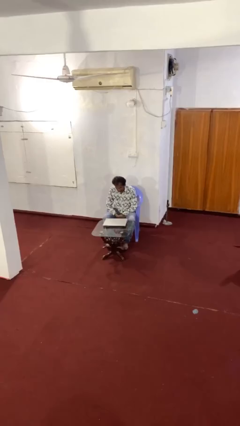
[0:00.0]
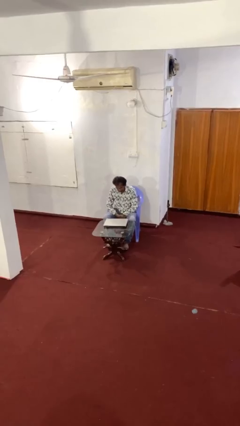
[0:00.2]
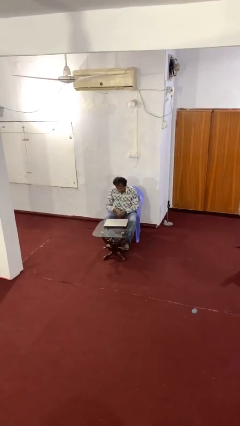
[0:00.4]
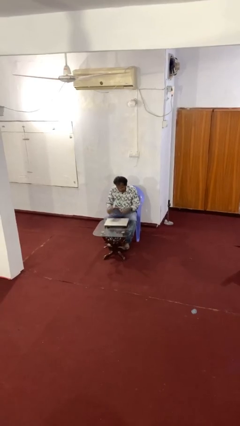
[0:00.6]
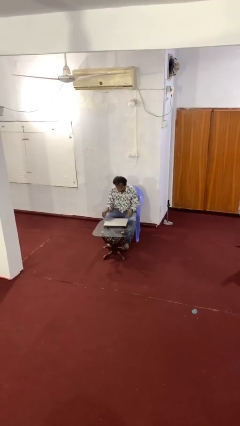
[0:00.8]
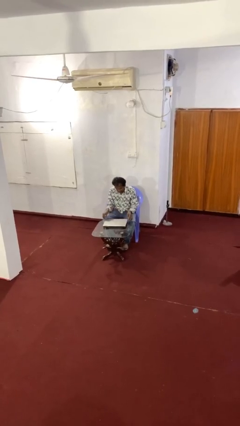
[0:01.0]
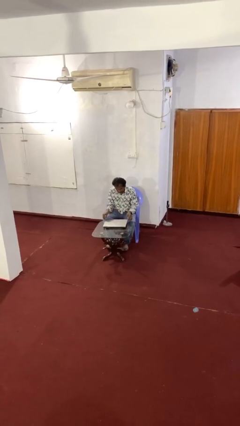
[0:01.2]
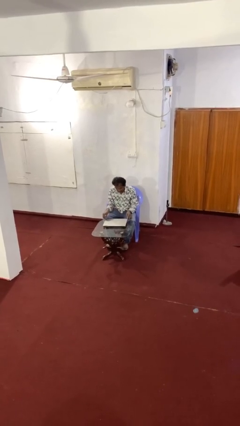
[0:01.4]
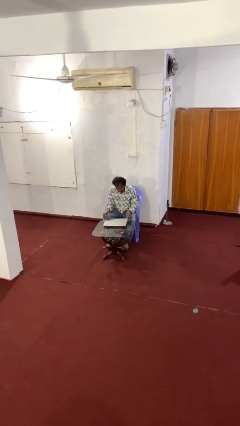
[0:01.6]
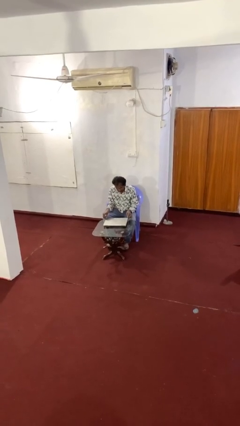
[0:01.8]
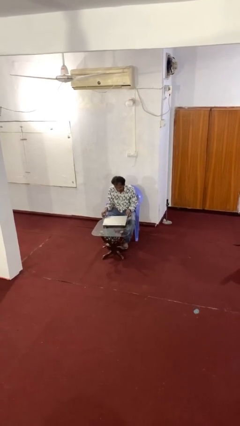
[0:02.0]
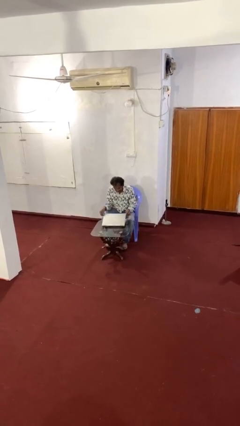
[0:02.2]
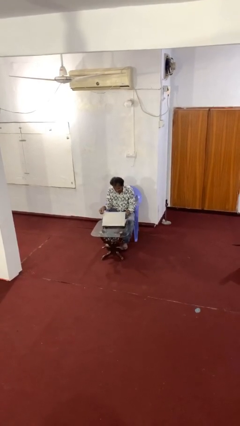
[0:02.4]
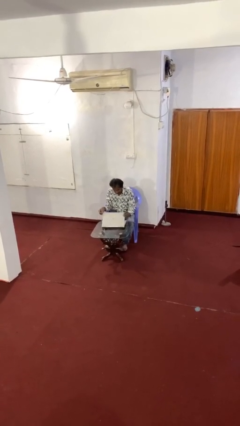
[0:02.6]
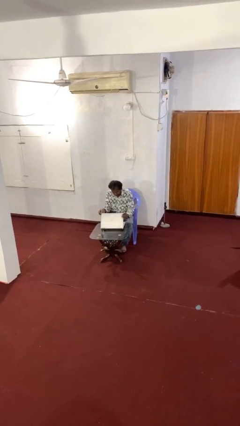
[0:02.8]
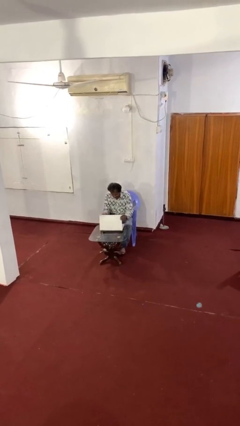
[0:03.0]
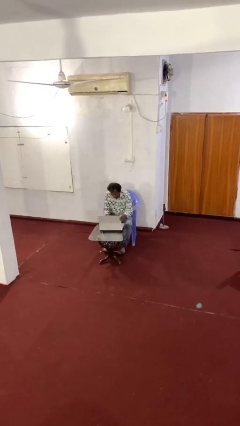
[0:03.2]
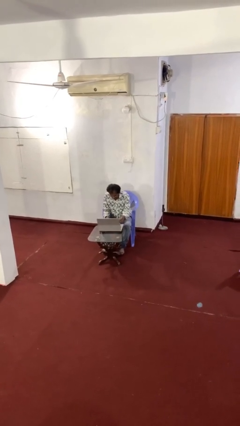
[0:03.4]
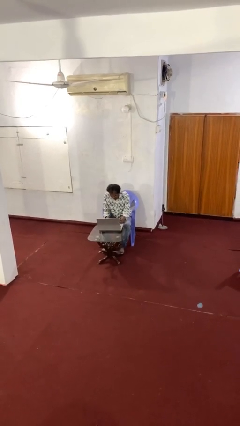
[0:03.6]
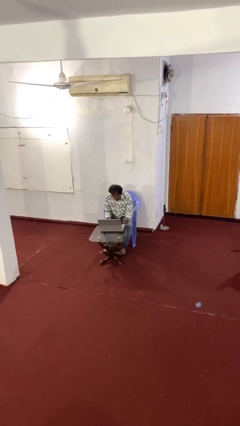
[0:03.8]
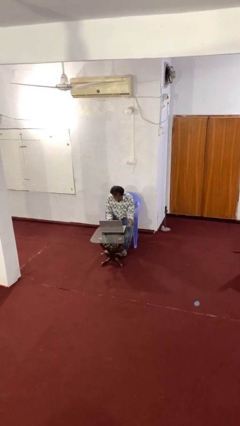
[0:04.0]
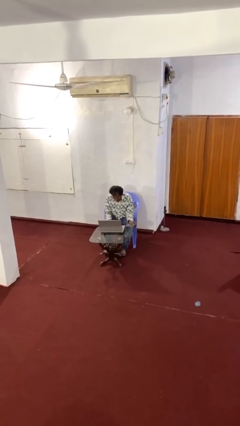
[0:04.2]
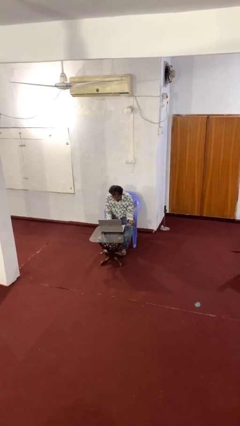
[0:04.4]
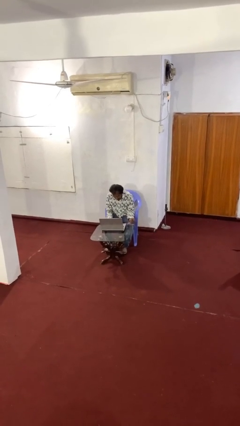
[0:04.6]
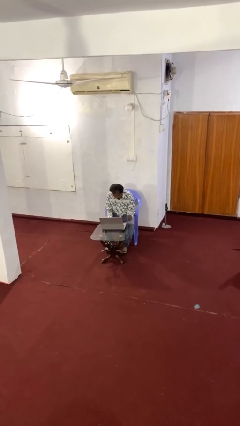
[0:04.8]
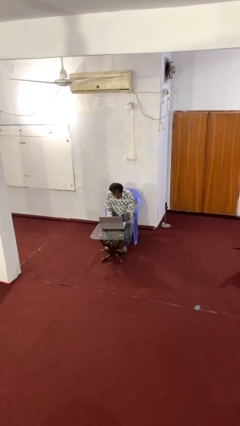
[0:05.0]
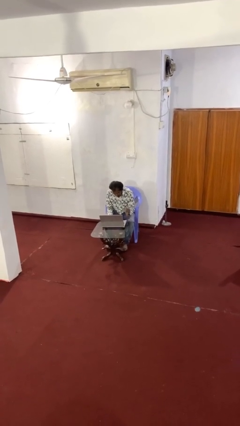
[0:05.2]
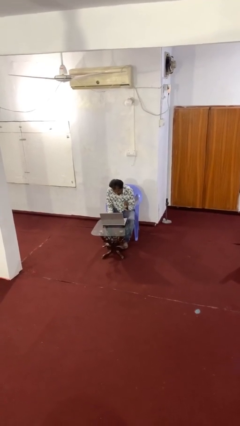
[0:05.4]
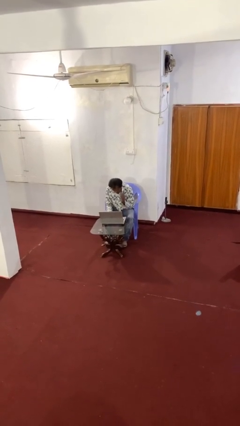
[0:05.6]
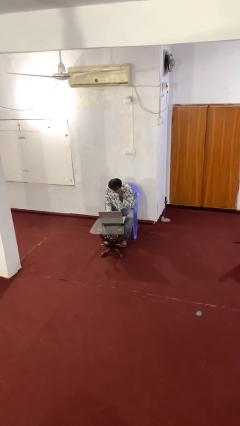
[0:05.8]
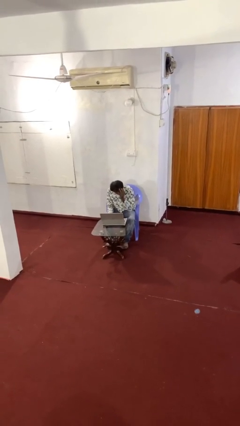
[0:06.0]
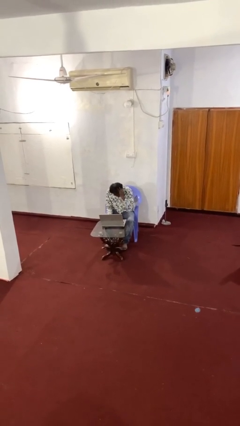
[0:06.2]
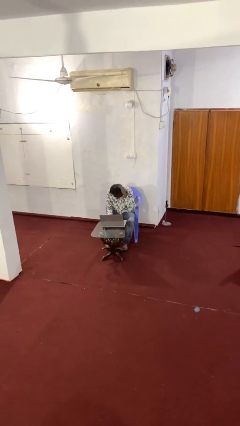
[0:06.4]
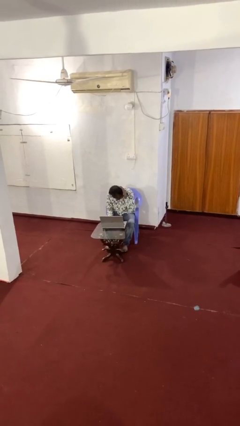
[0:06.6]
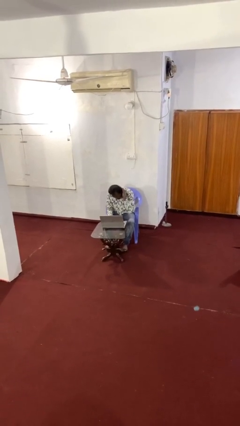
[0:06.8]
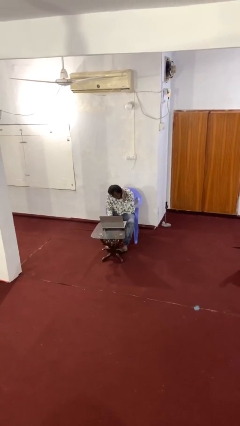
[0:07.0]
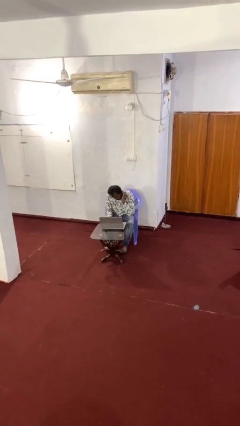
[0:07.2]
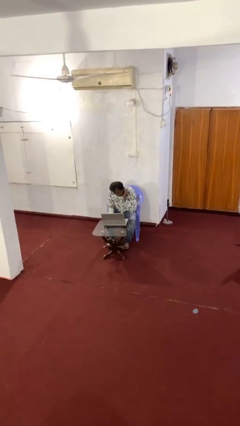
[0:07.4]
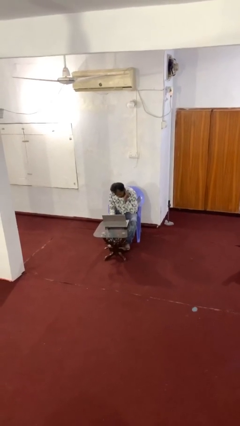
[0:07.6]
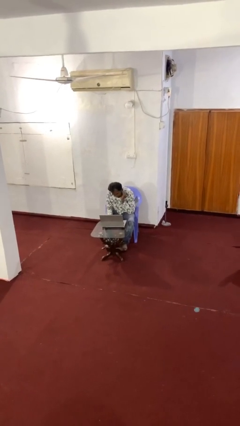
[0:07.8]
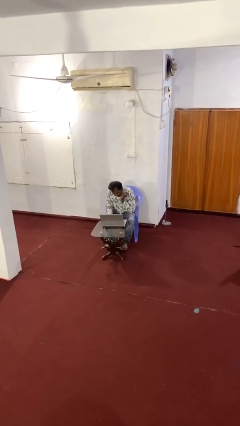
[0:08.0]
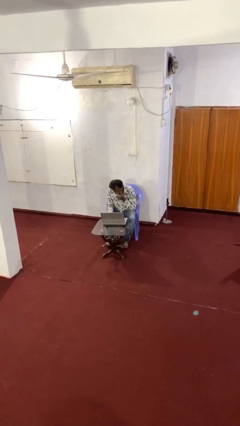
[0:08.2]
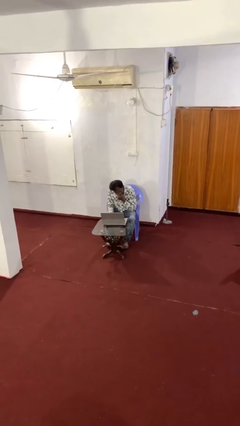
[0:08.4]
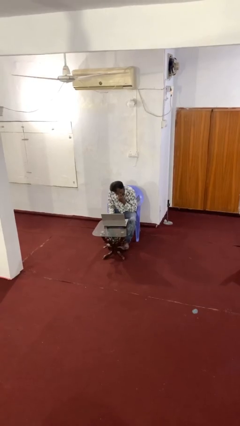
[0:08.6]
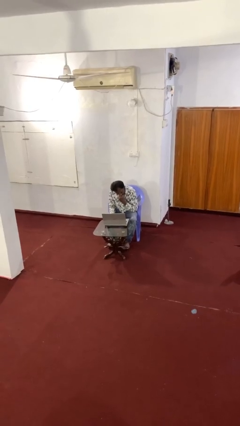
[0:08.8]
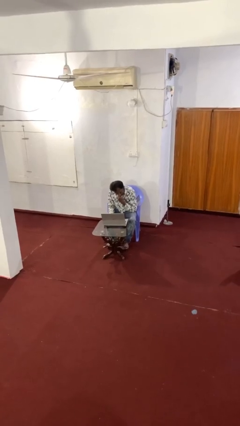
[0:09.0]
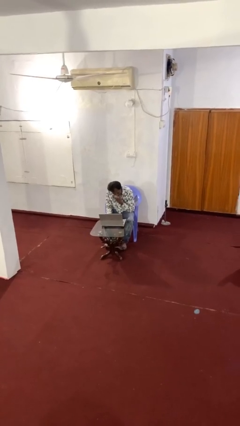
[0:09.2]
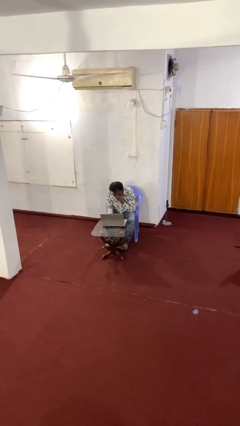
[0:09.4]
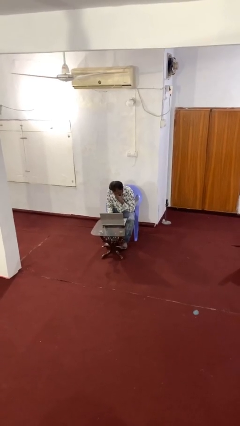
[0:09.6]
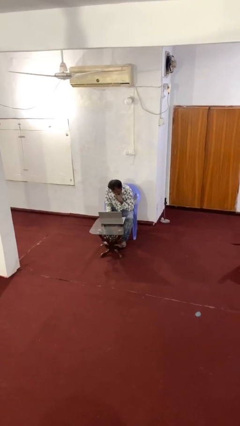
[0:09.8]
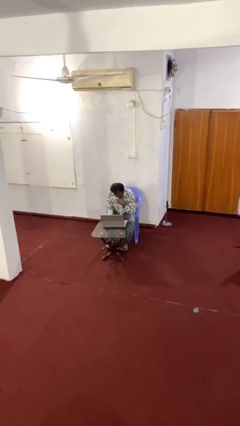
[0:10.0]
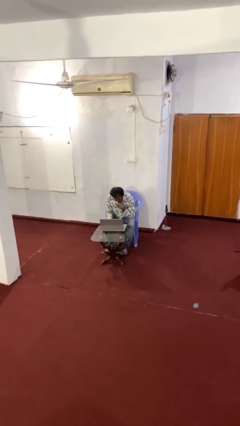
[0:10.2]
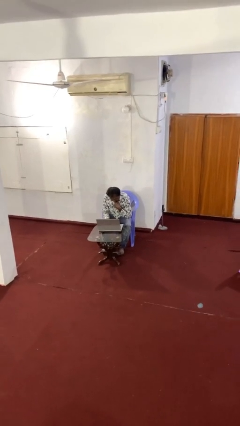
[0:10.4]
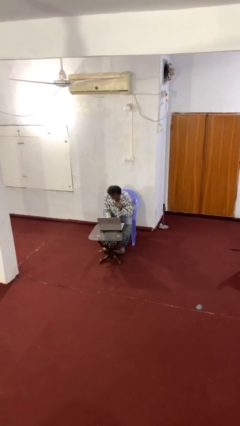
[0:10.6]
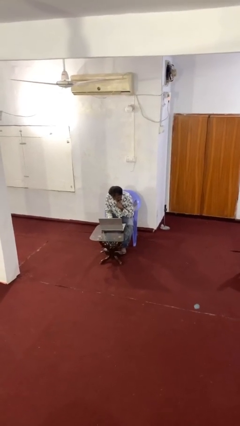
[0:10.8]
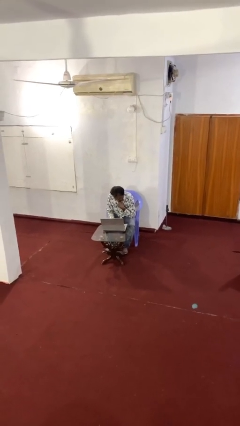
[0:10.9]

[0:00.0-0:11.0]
person interacts with laptop

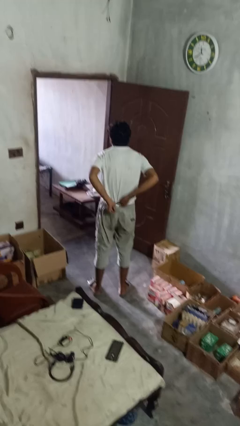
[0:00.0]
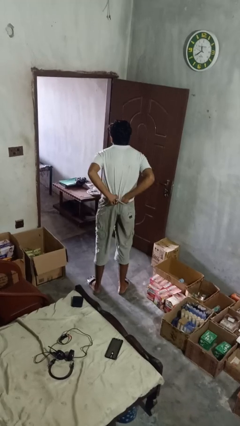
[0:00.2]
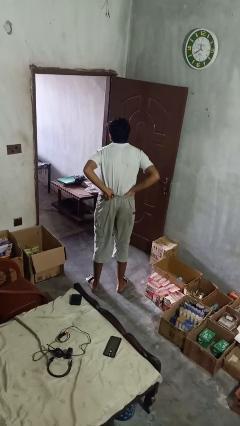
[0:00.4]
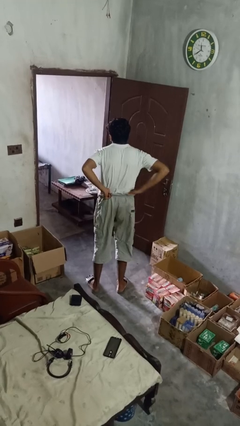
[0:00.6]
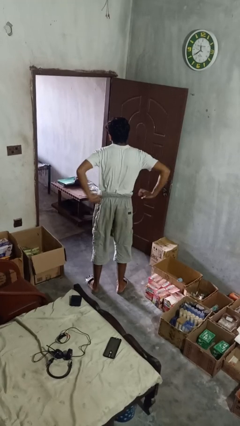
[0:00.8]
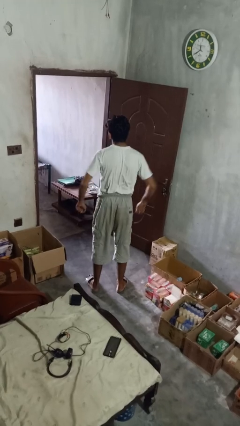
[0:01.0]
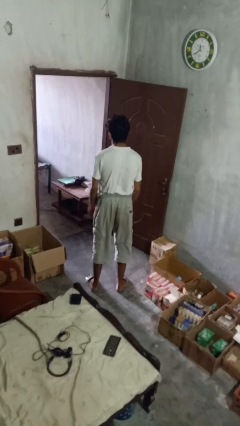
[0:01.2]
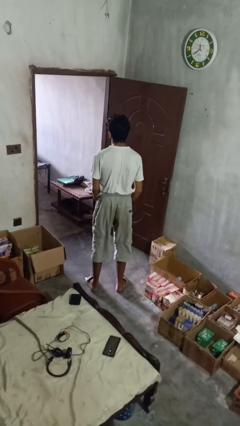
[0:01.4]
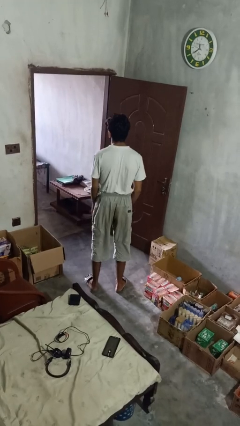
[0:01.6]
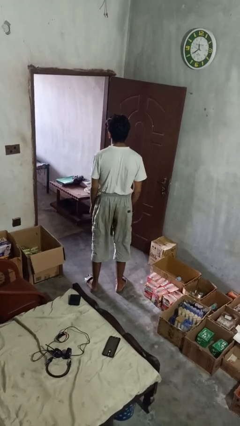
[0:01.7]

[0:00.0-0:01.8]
person tucks in shirt

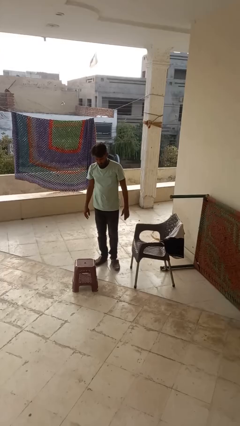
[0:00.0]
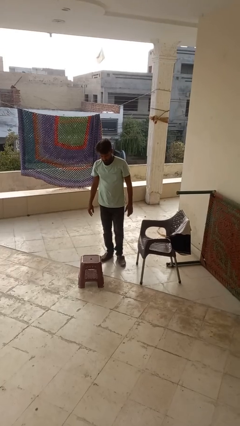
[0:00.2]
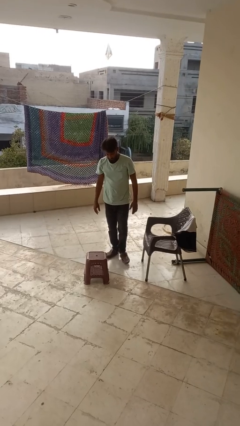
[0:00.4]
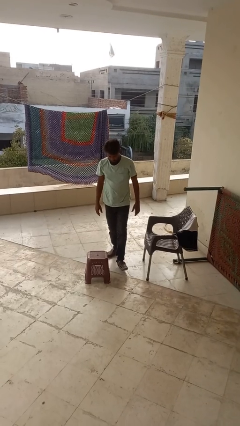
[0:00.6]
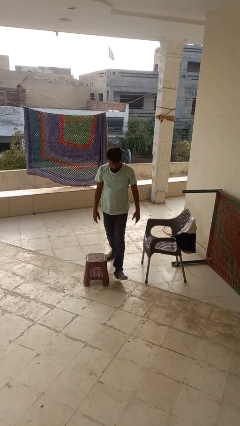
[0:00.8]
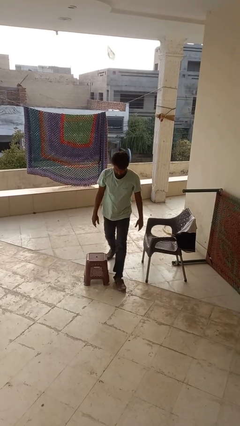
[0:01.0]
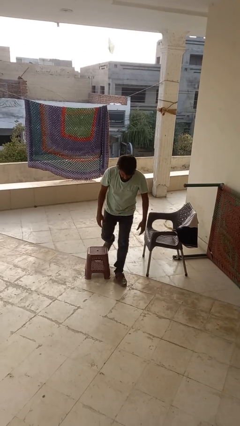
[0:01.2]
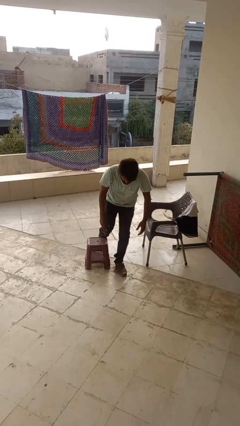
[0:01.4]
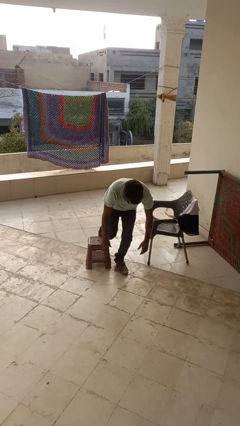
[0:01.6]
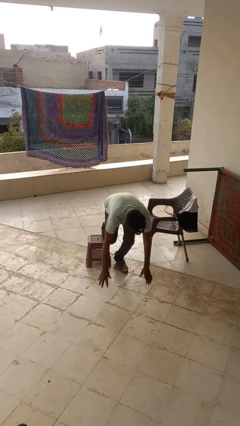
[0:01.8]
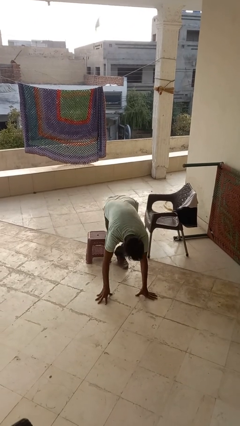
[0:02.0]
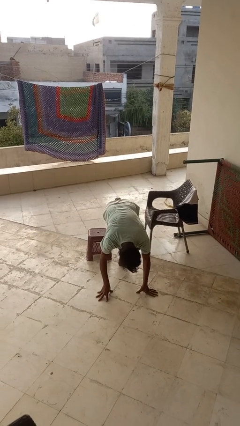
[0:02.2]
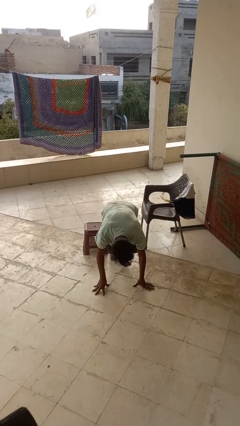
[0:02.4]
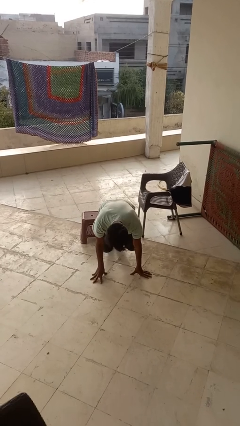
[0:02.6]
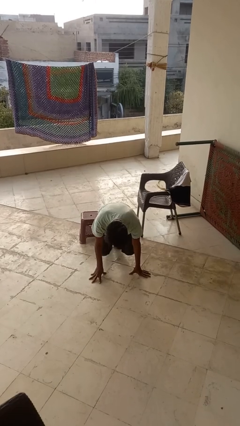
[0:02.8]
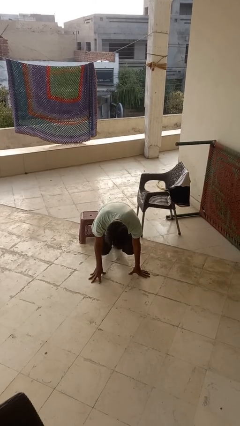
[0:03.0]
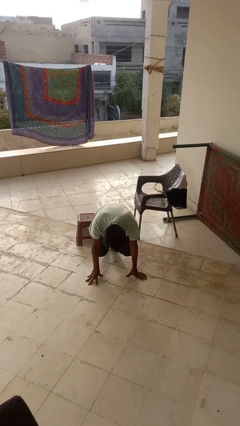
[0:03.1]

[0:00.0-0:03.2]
person trips on object on floor

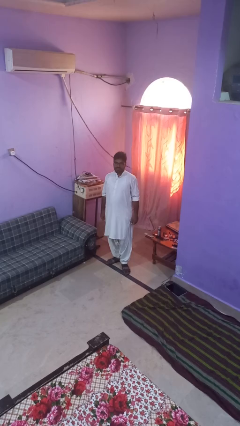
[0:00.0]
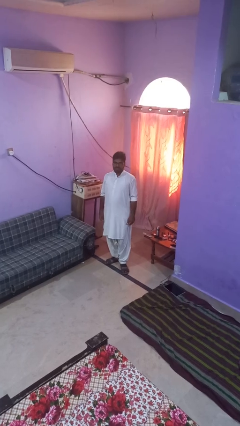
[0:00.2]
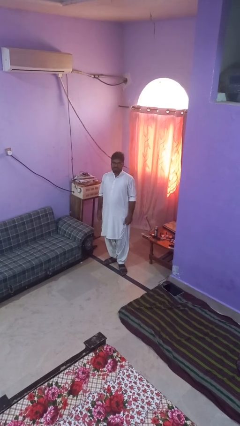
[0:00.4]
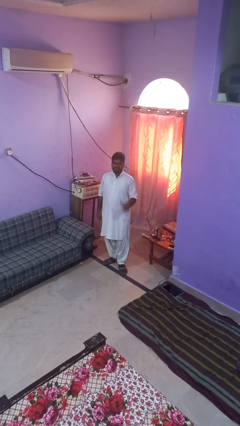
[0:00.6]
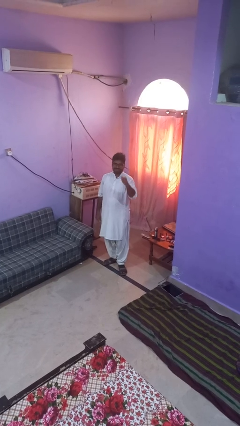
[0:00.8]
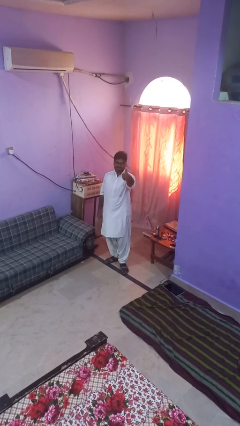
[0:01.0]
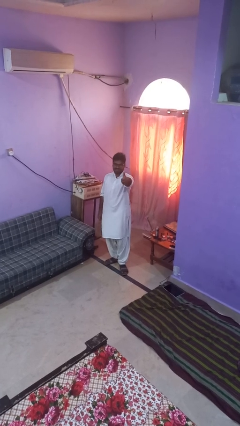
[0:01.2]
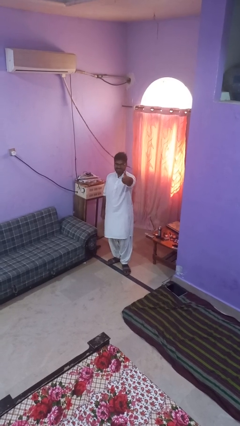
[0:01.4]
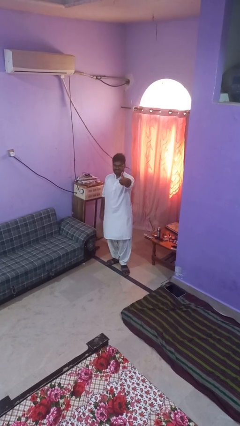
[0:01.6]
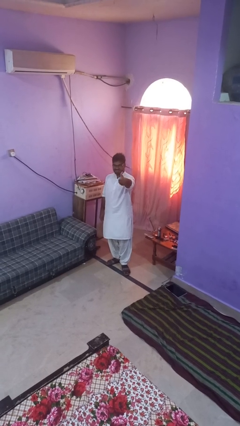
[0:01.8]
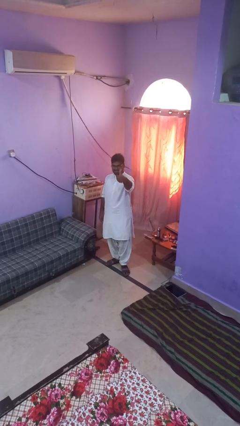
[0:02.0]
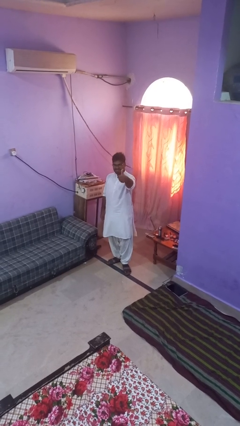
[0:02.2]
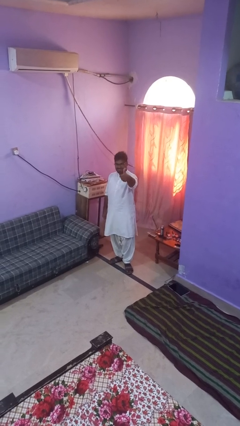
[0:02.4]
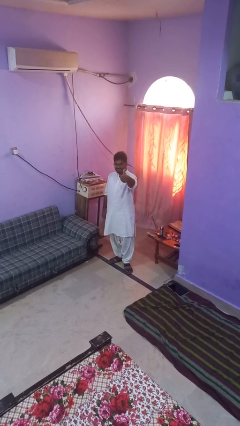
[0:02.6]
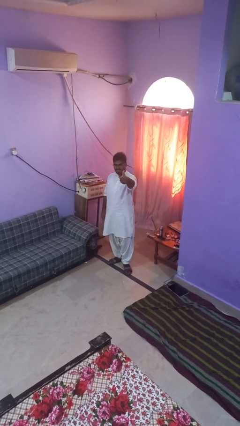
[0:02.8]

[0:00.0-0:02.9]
person gestures thumbs up
